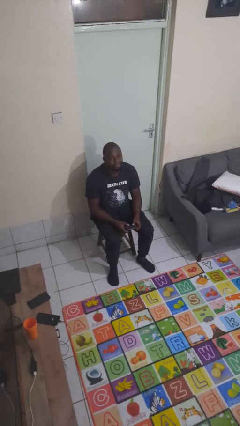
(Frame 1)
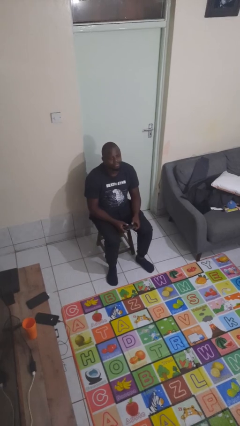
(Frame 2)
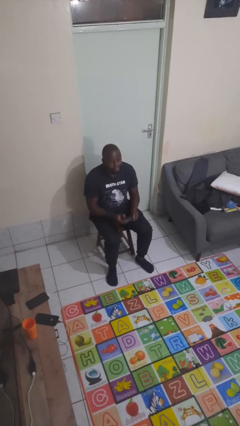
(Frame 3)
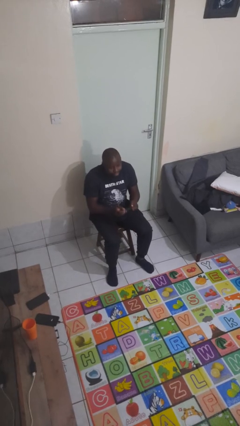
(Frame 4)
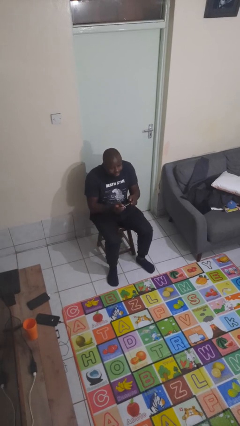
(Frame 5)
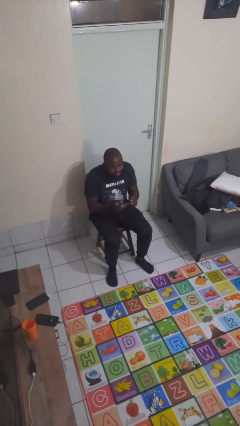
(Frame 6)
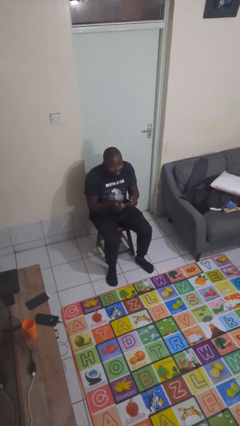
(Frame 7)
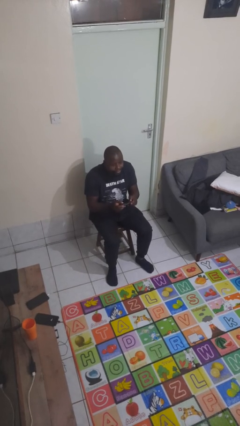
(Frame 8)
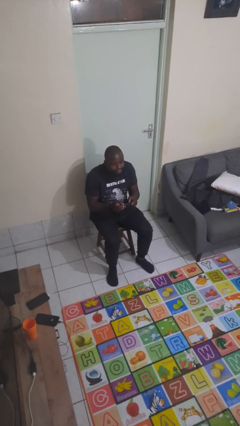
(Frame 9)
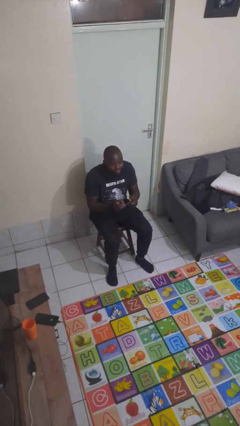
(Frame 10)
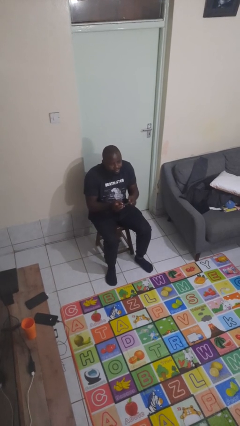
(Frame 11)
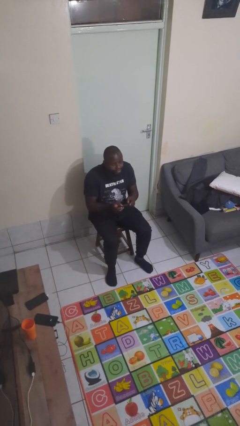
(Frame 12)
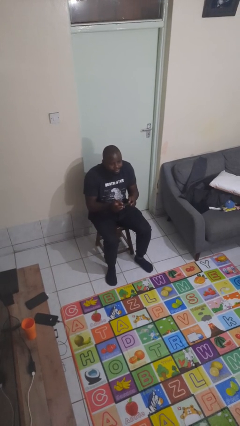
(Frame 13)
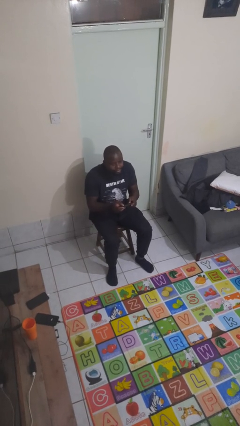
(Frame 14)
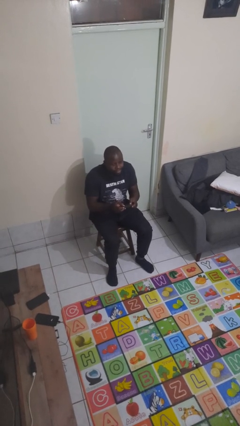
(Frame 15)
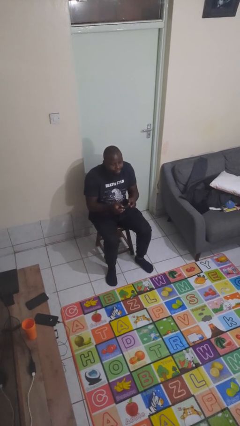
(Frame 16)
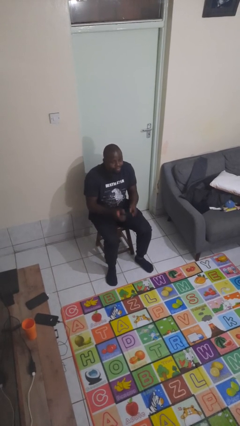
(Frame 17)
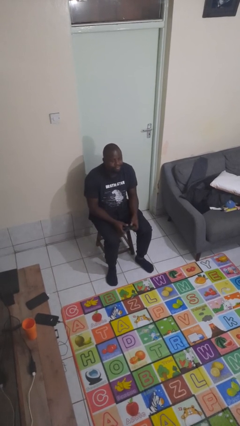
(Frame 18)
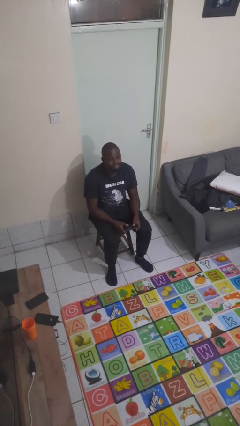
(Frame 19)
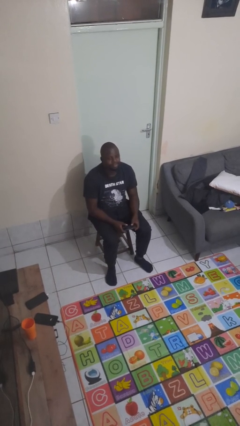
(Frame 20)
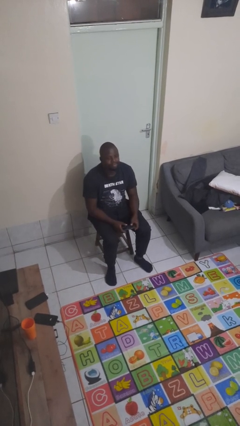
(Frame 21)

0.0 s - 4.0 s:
person interacts with handheld game

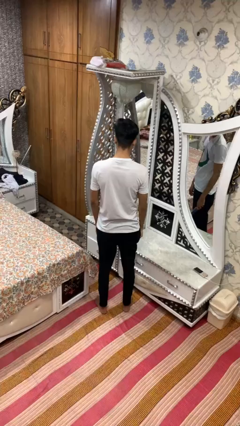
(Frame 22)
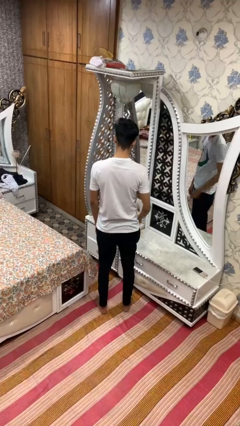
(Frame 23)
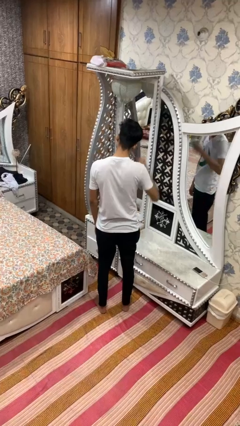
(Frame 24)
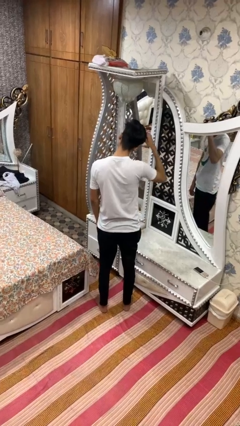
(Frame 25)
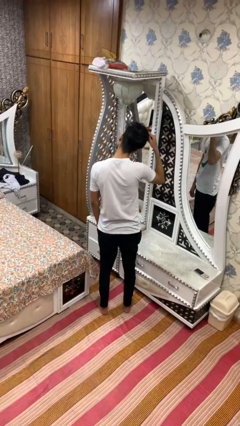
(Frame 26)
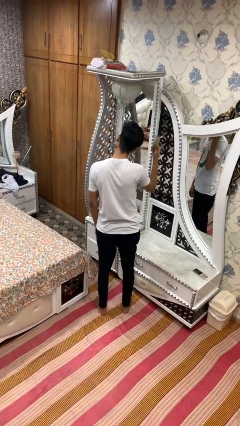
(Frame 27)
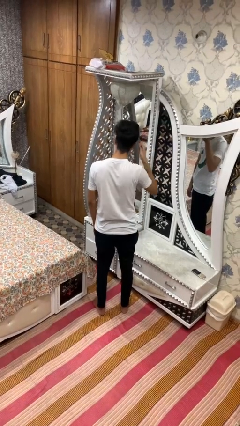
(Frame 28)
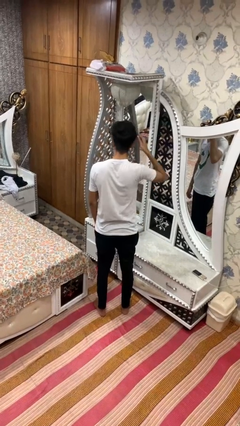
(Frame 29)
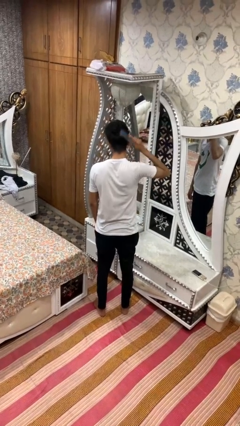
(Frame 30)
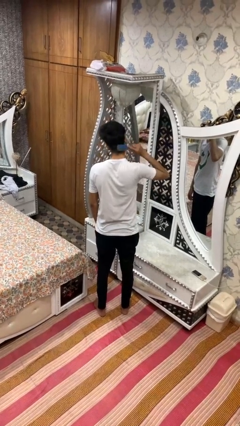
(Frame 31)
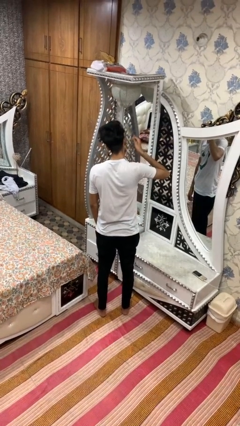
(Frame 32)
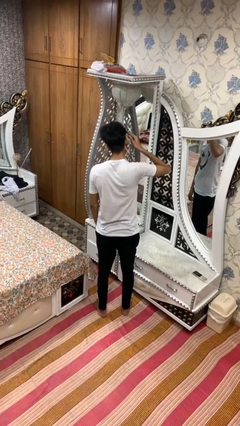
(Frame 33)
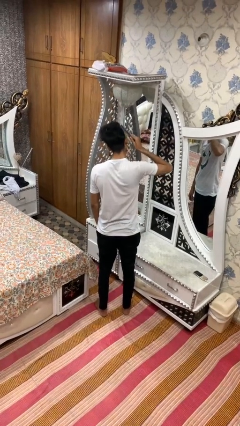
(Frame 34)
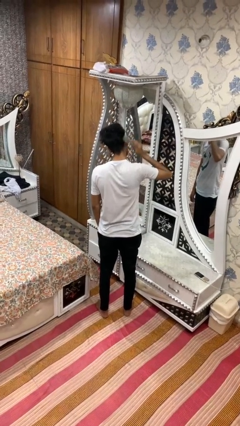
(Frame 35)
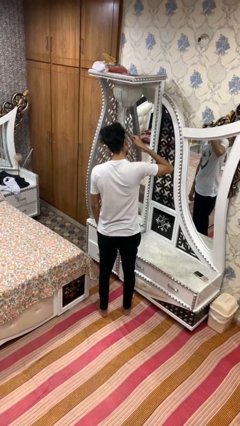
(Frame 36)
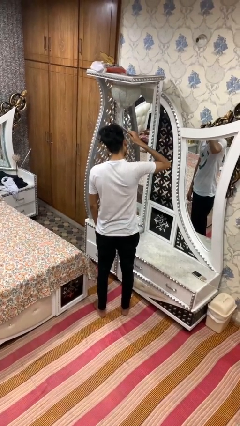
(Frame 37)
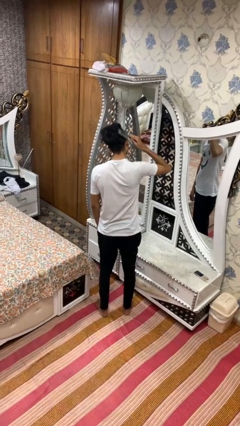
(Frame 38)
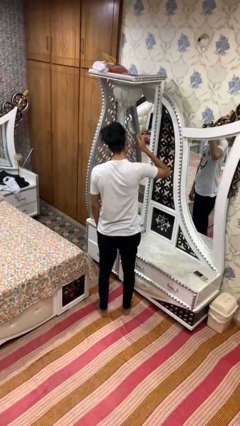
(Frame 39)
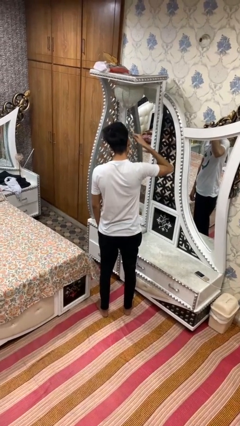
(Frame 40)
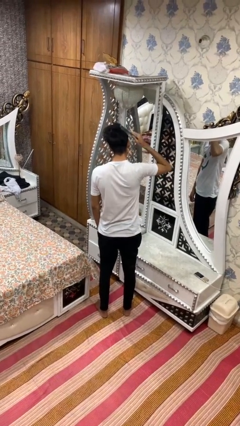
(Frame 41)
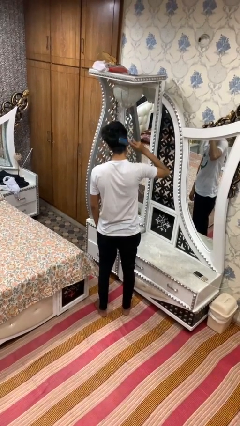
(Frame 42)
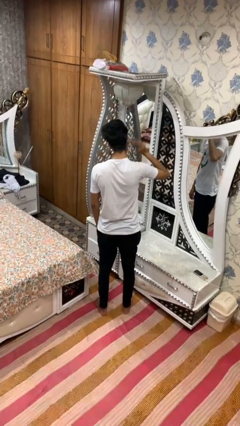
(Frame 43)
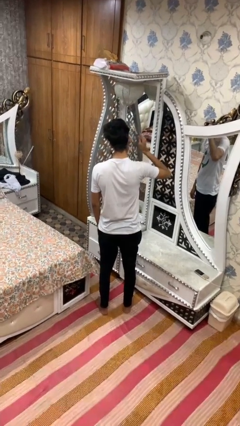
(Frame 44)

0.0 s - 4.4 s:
person brushes hair

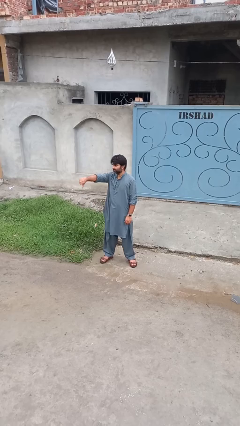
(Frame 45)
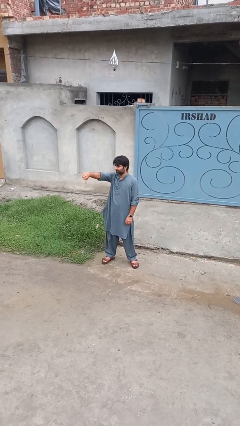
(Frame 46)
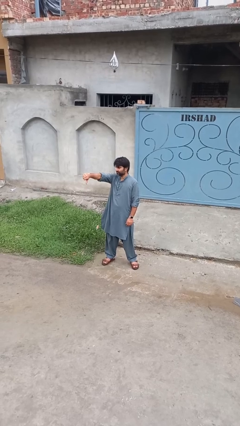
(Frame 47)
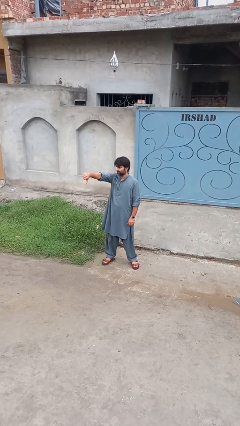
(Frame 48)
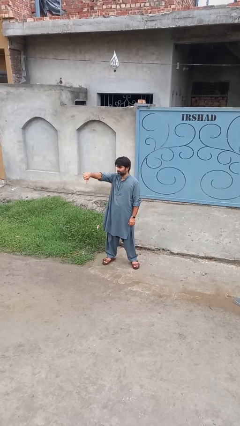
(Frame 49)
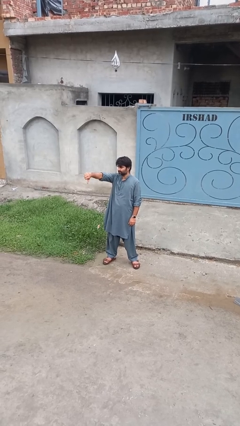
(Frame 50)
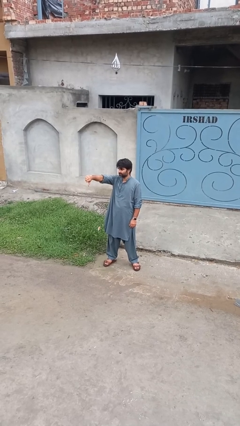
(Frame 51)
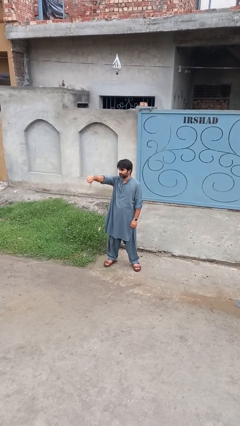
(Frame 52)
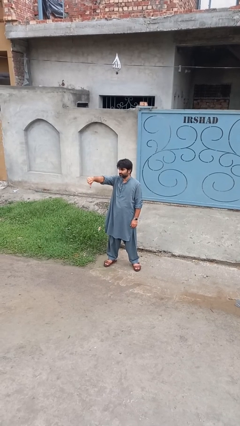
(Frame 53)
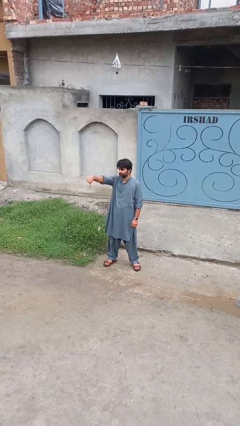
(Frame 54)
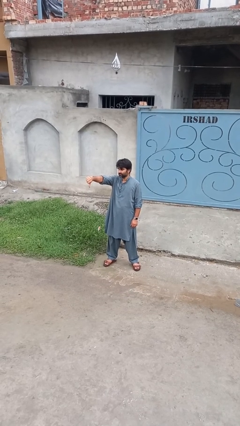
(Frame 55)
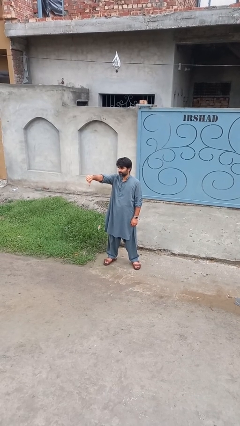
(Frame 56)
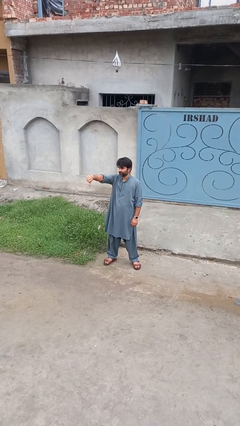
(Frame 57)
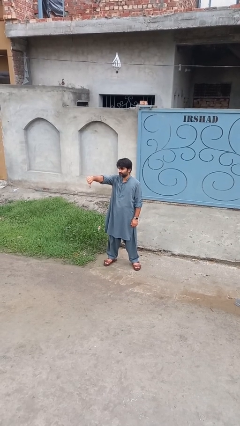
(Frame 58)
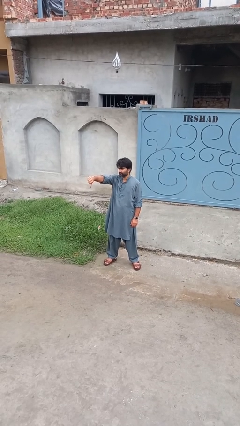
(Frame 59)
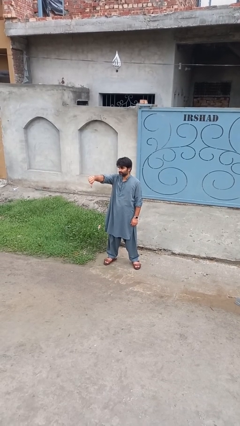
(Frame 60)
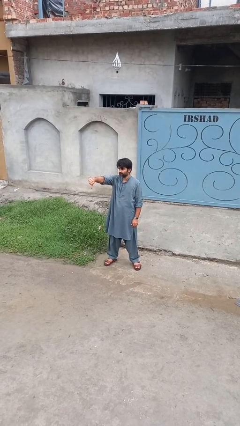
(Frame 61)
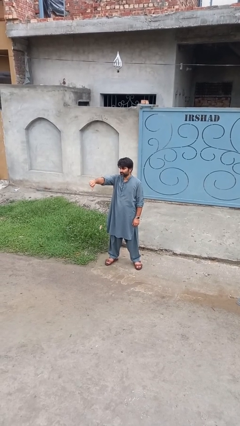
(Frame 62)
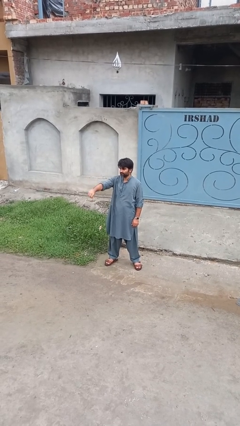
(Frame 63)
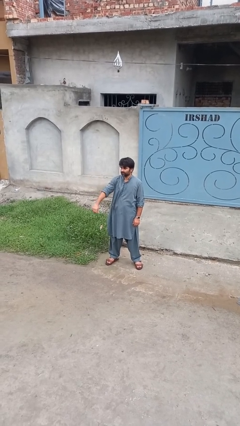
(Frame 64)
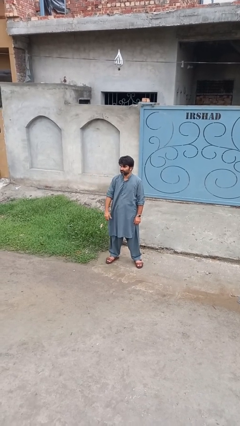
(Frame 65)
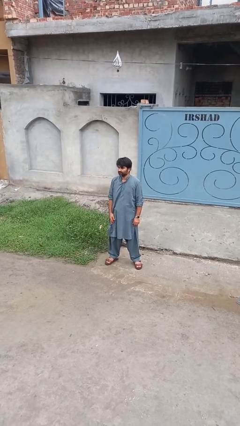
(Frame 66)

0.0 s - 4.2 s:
person gestures thumbs down

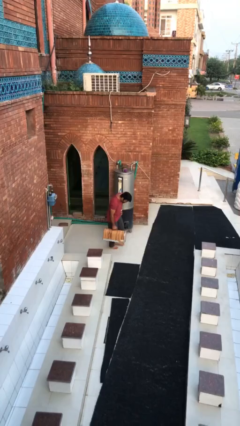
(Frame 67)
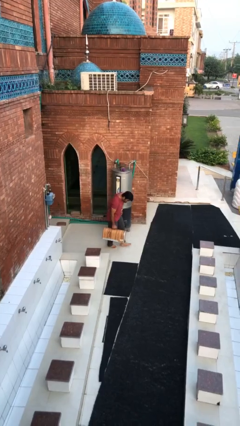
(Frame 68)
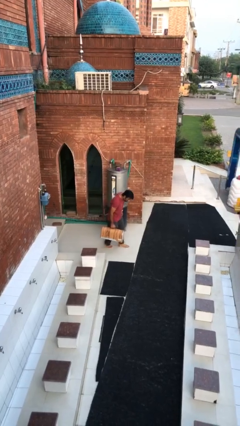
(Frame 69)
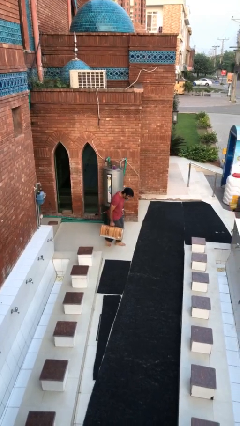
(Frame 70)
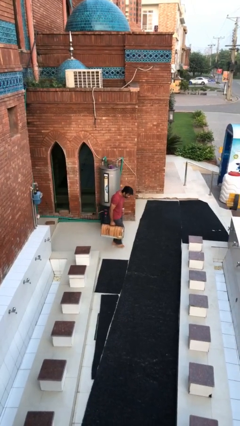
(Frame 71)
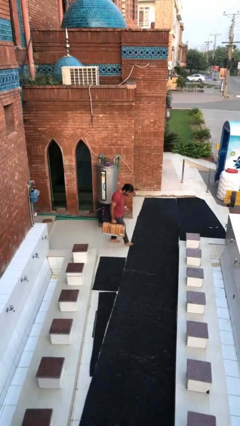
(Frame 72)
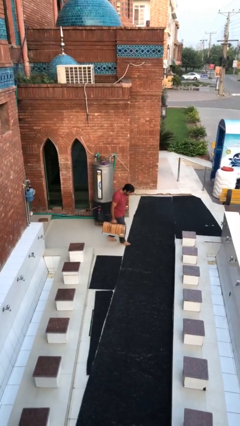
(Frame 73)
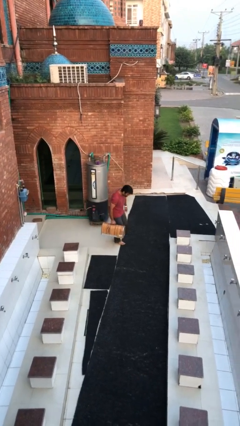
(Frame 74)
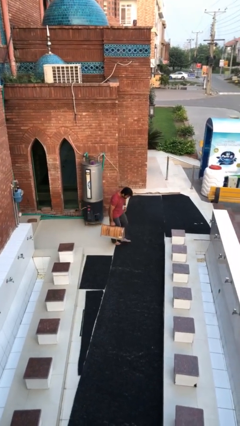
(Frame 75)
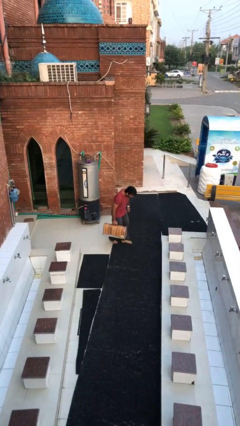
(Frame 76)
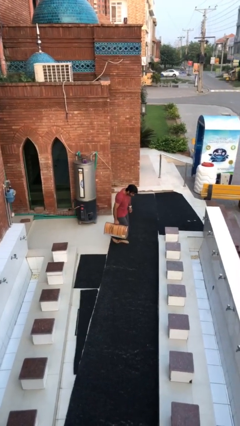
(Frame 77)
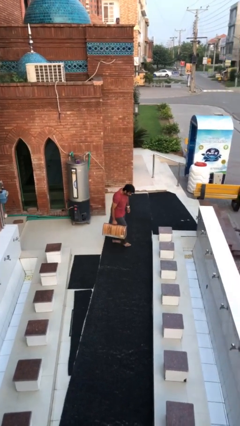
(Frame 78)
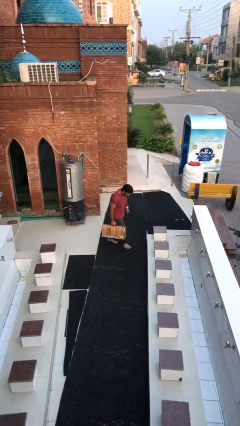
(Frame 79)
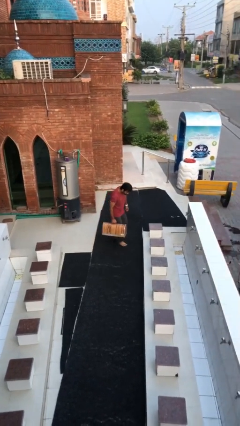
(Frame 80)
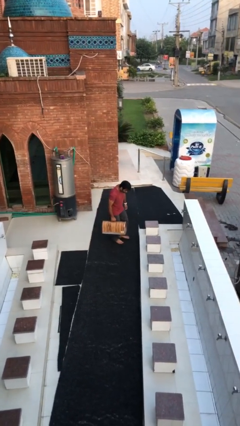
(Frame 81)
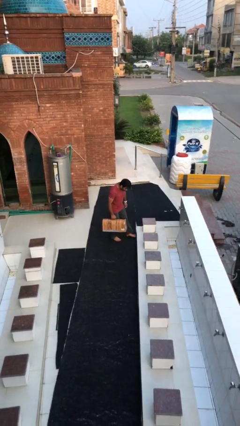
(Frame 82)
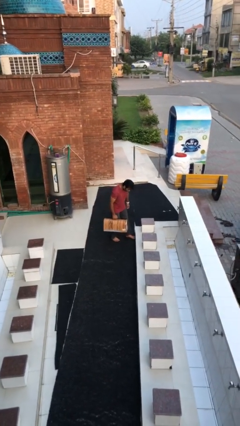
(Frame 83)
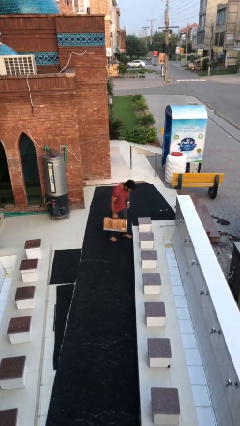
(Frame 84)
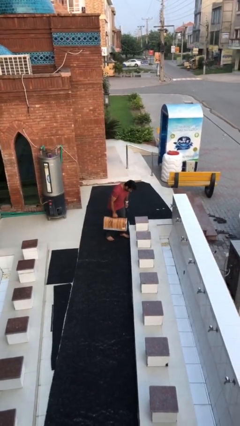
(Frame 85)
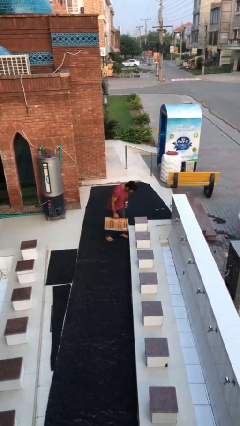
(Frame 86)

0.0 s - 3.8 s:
person carries heavy object

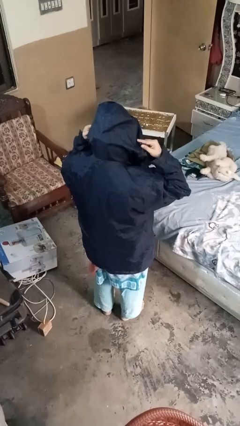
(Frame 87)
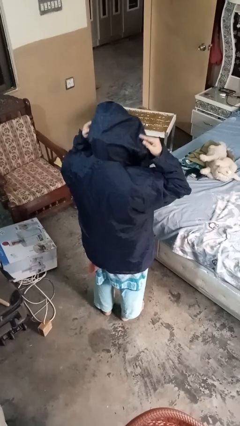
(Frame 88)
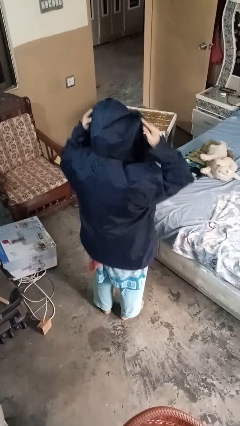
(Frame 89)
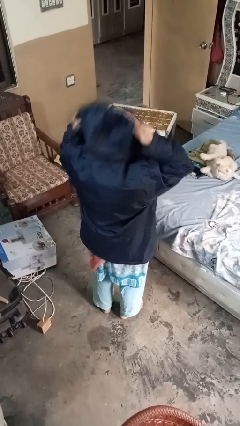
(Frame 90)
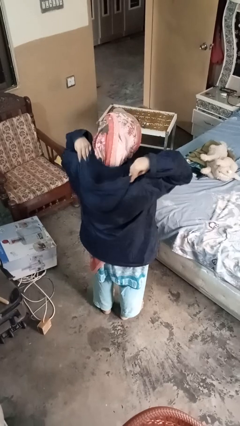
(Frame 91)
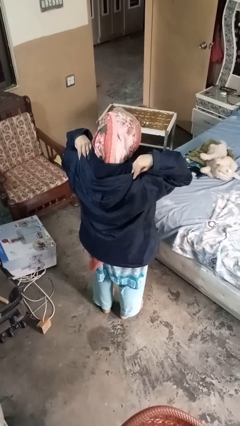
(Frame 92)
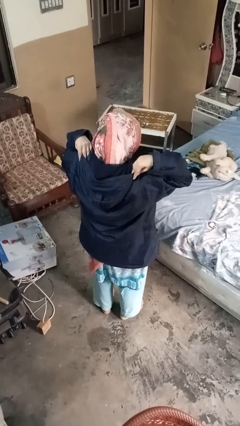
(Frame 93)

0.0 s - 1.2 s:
person takes off hoodie
